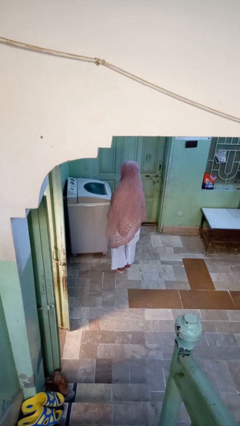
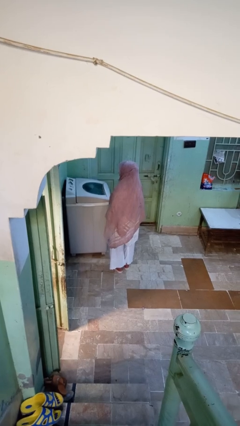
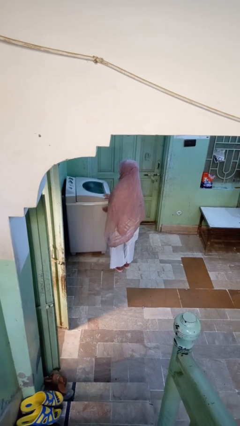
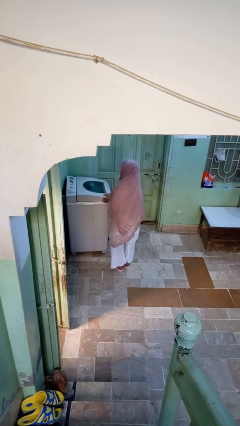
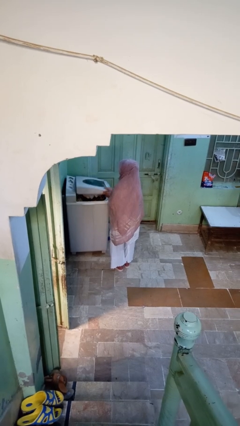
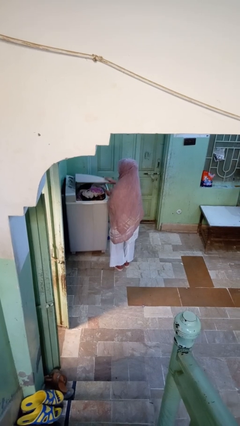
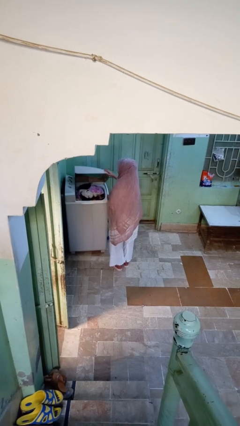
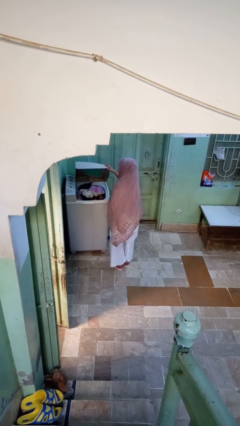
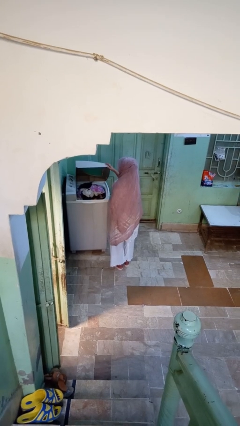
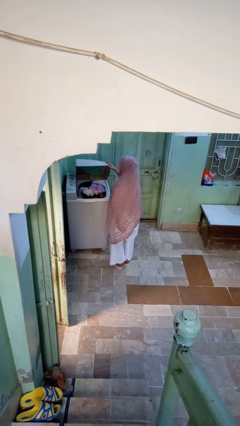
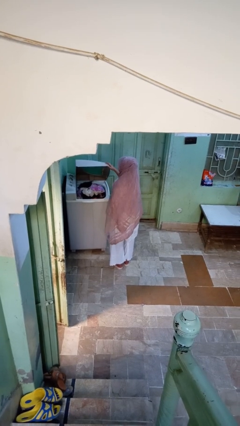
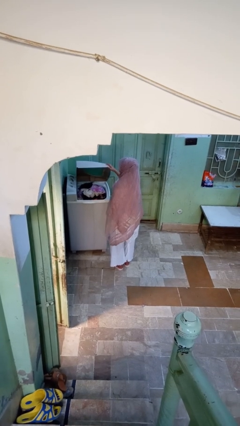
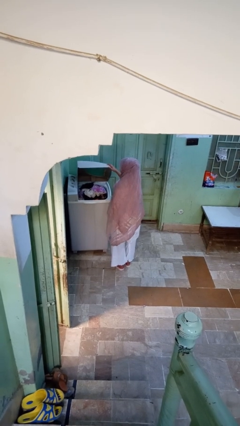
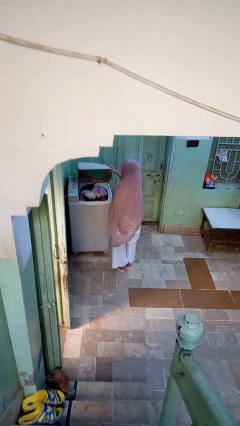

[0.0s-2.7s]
person opens clothes washer

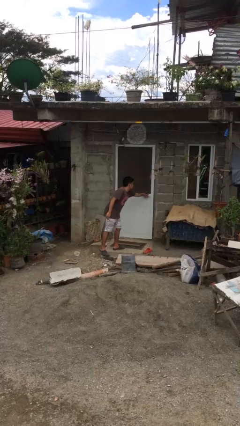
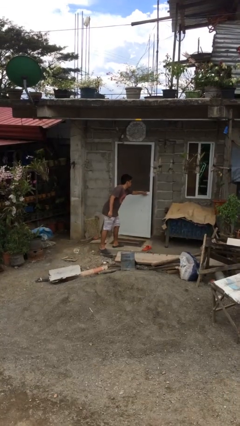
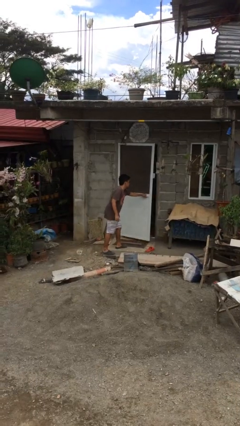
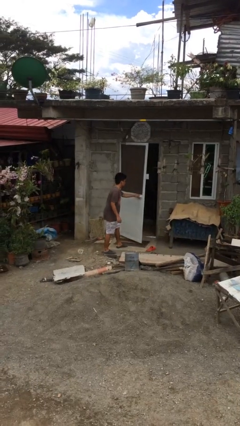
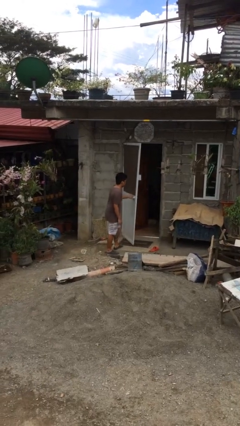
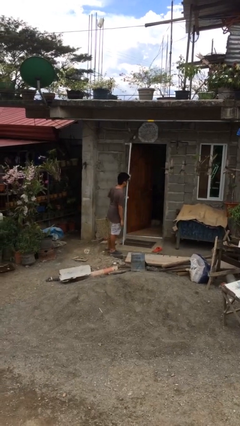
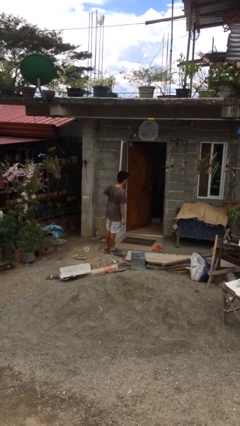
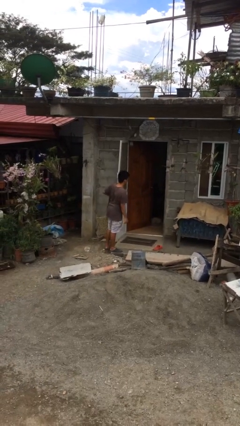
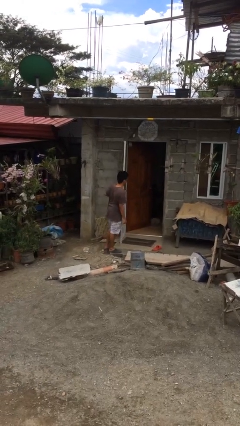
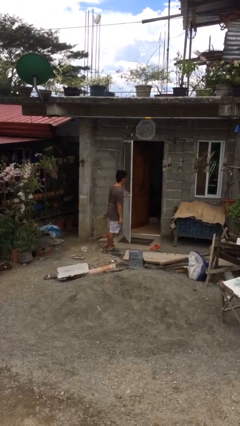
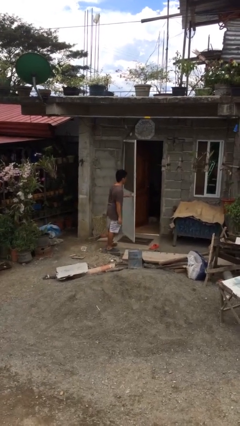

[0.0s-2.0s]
person opens facility door

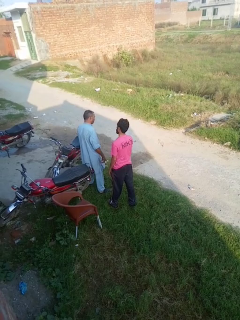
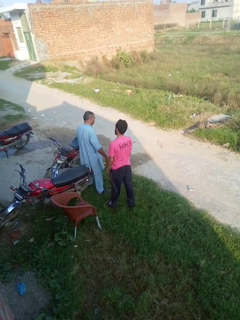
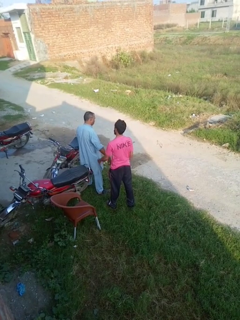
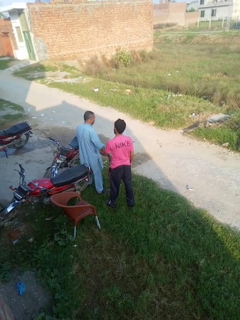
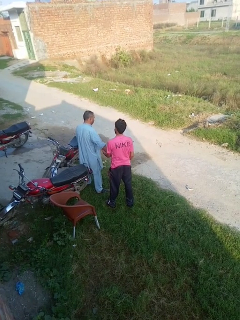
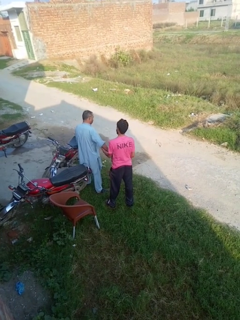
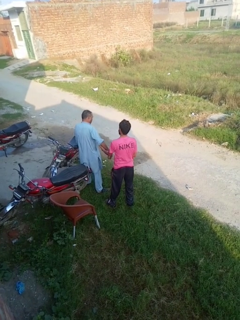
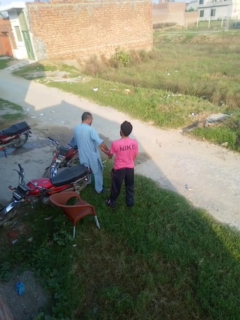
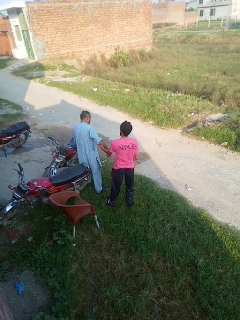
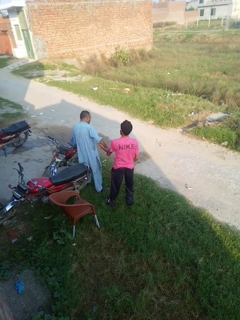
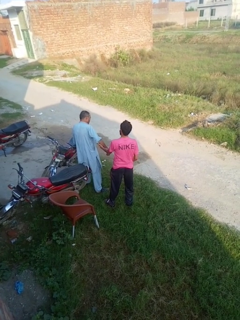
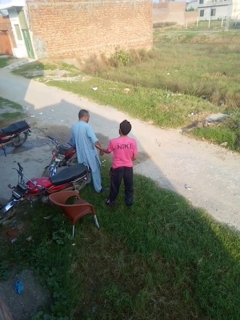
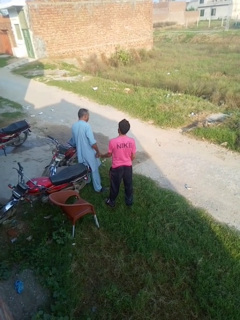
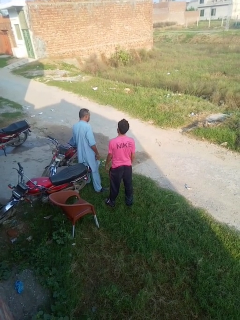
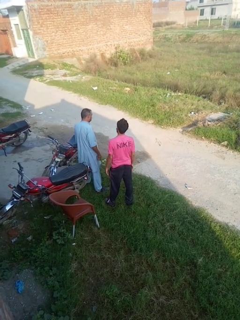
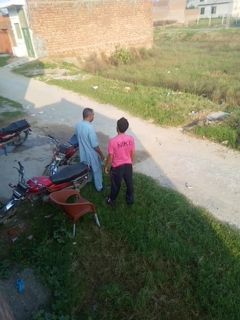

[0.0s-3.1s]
person grabs person by forearm

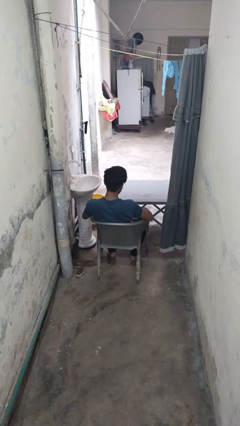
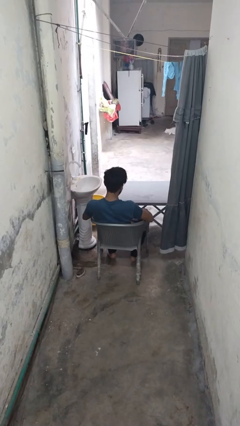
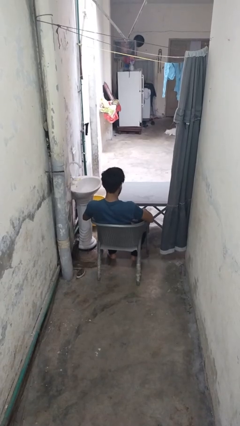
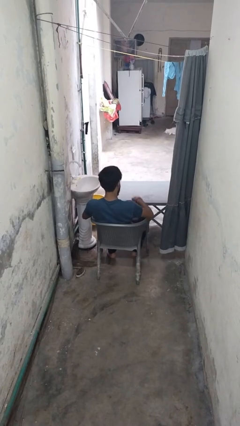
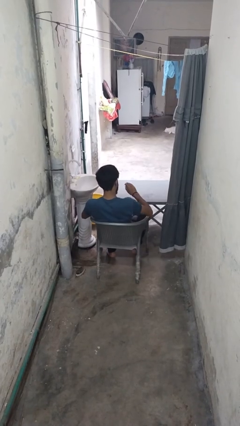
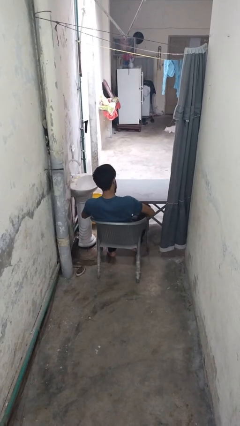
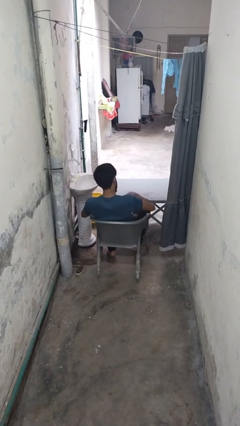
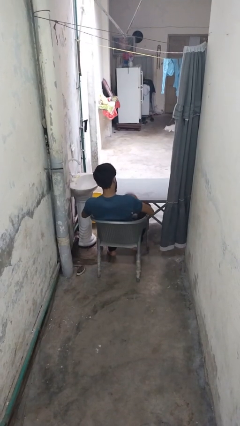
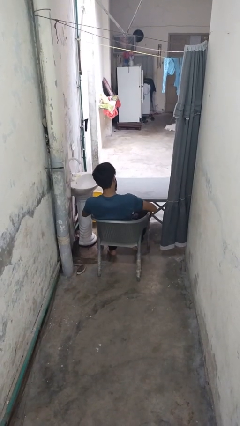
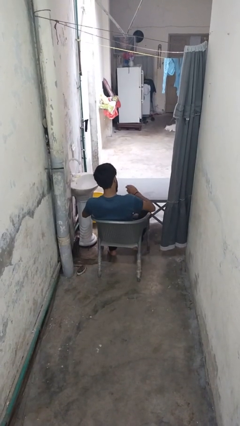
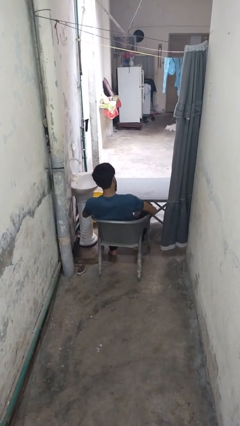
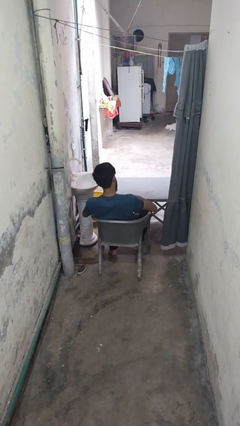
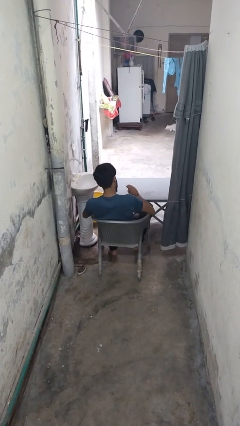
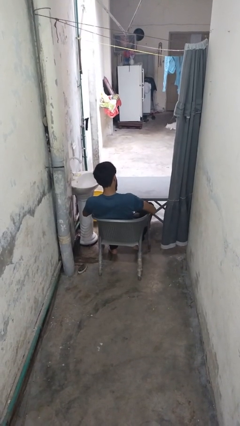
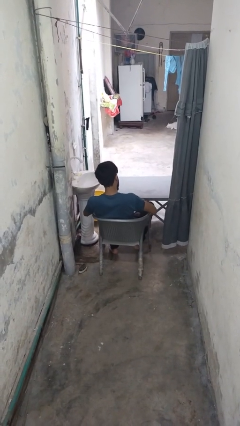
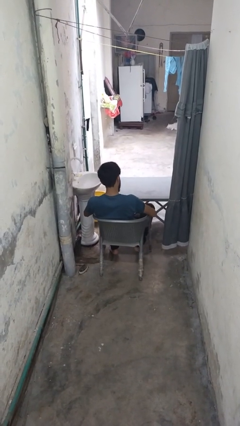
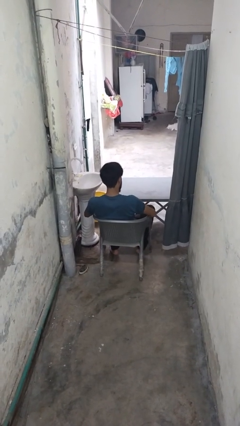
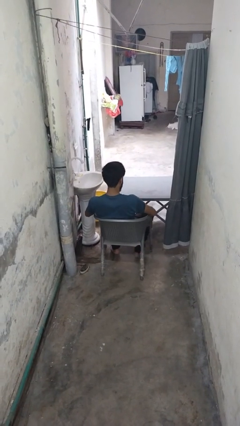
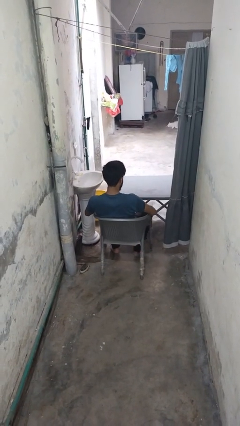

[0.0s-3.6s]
person slaps hands on thighs

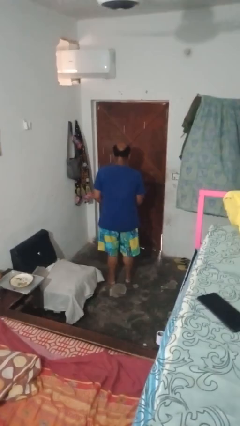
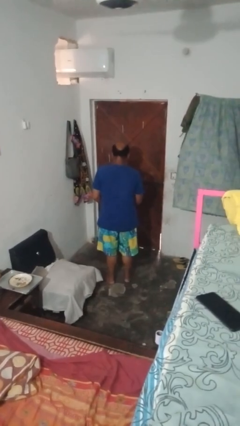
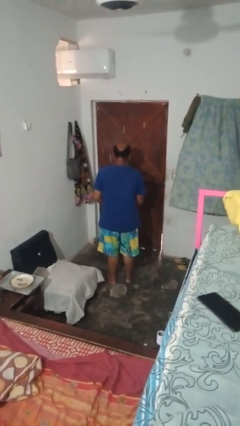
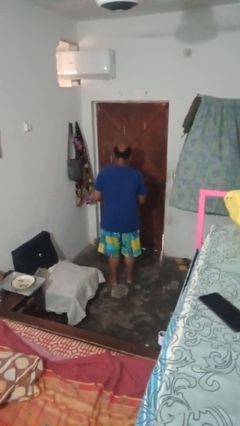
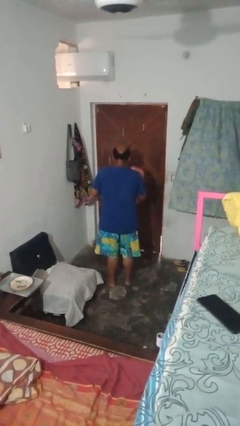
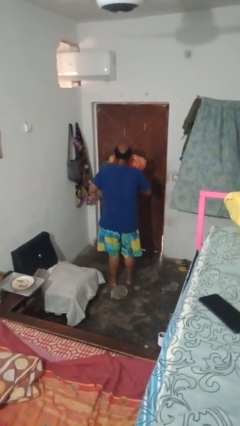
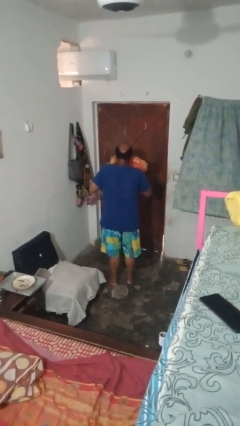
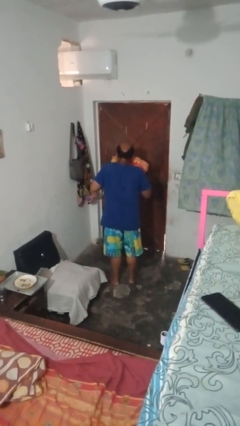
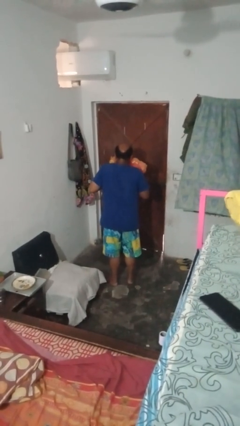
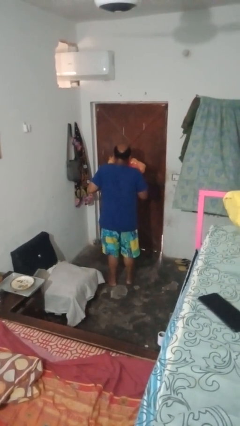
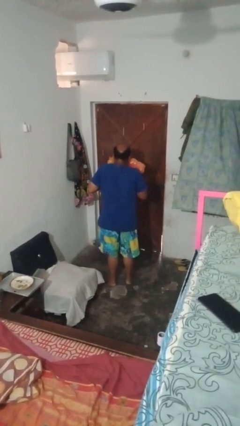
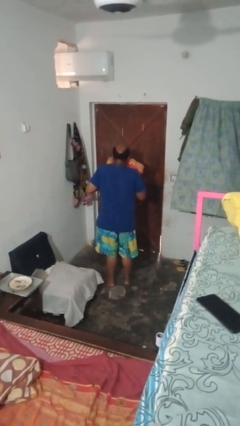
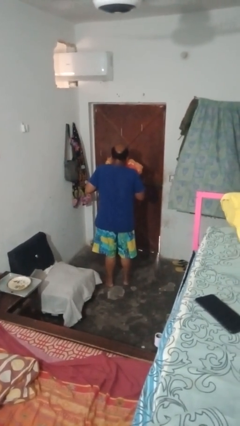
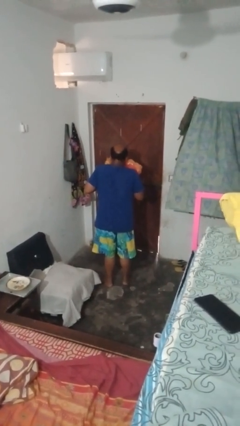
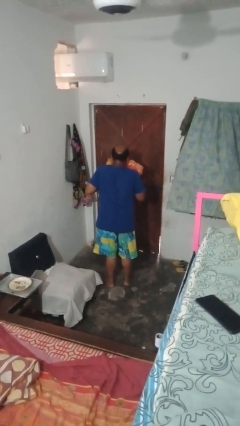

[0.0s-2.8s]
person hugs stuffed animal

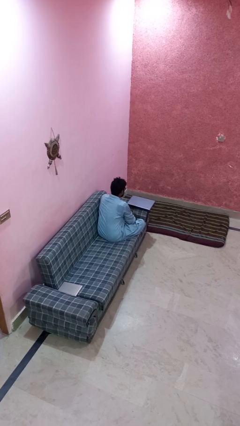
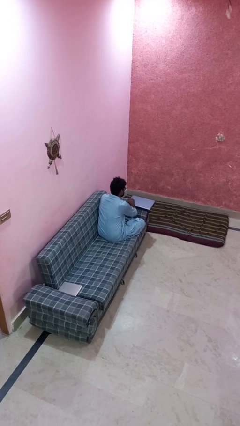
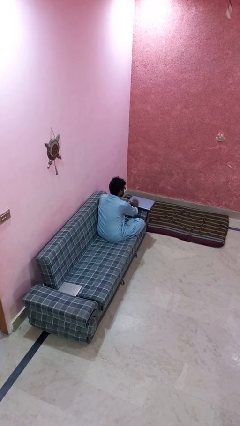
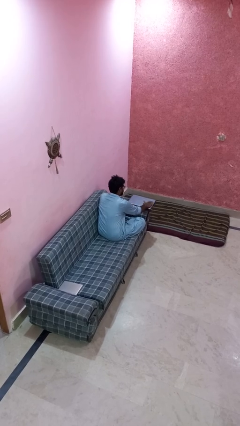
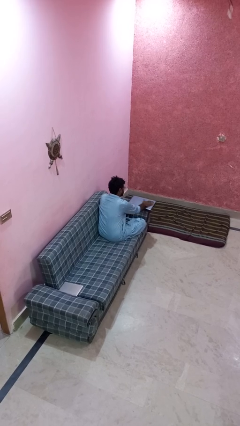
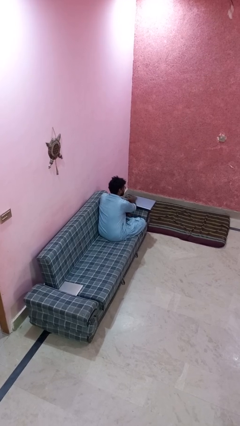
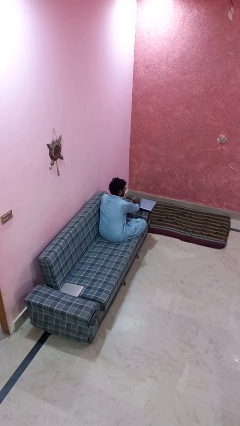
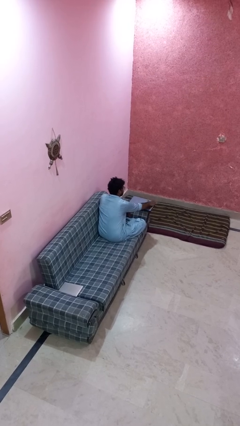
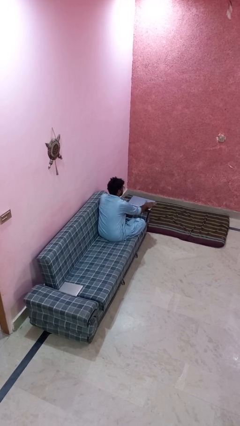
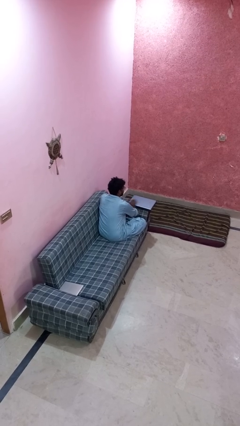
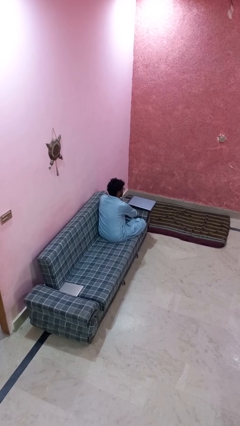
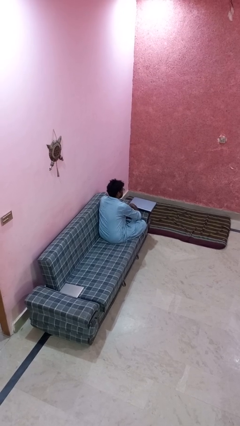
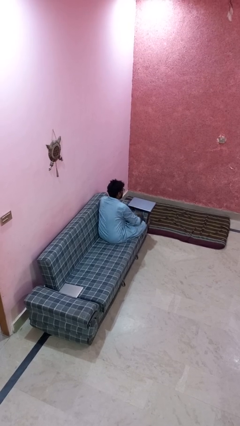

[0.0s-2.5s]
person waves hand over object

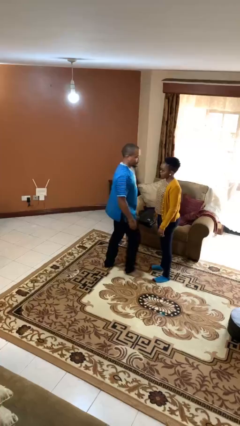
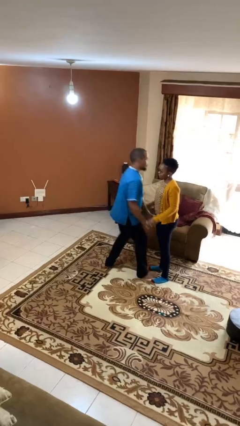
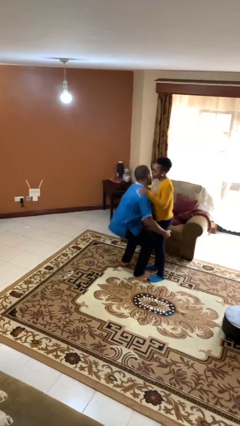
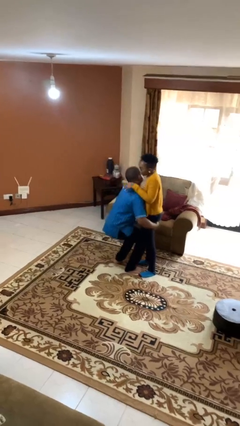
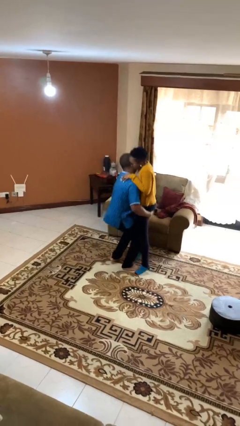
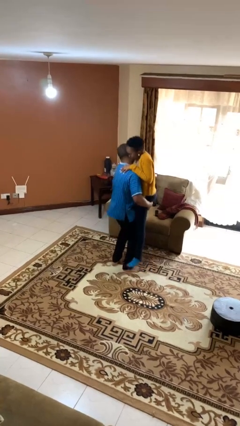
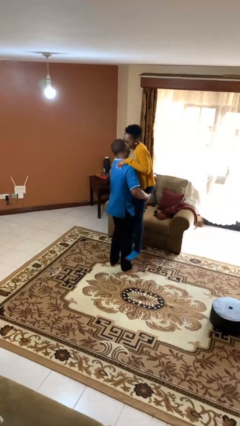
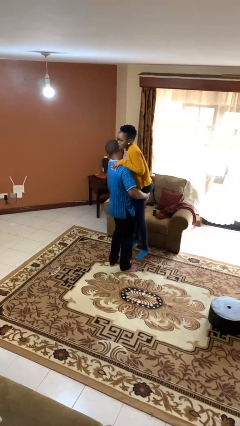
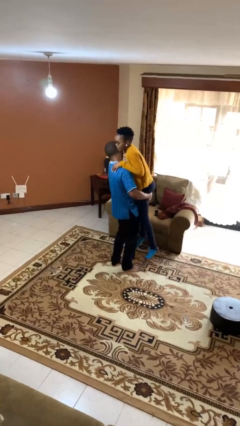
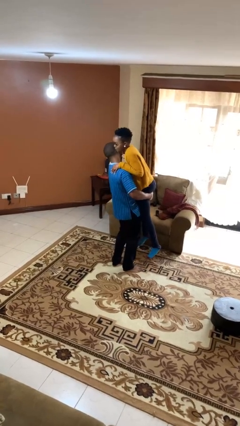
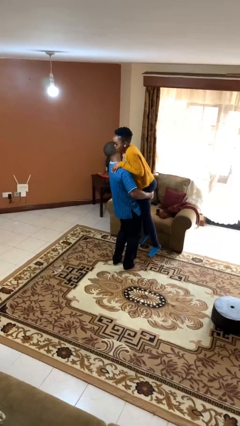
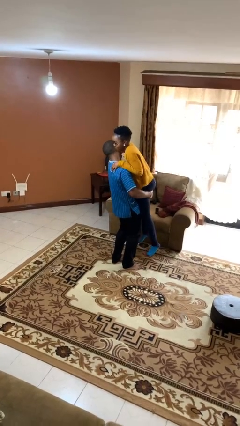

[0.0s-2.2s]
person picks up person
